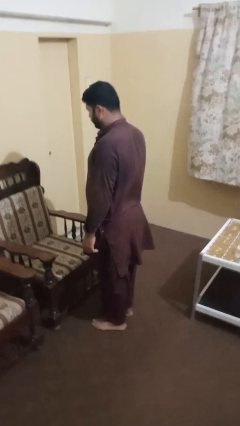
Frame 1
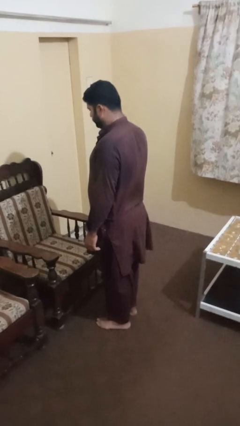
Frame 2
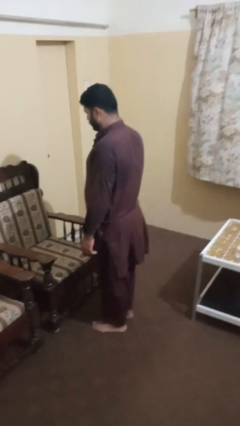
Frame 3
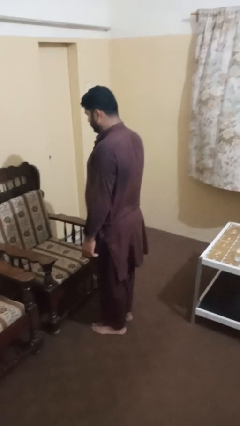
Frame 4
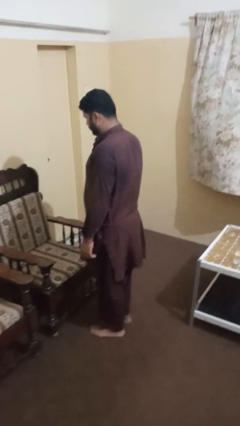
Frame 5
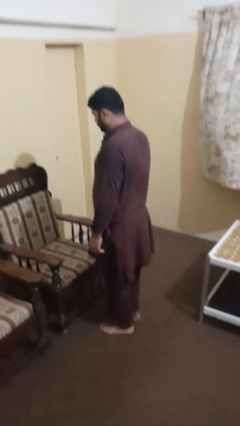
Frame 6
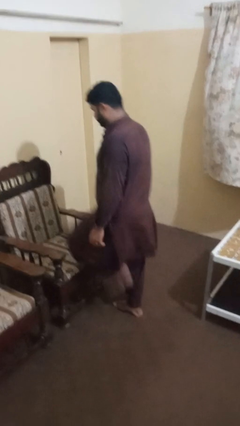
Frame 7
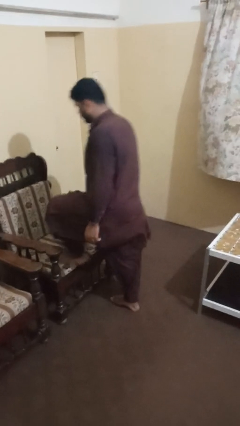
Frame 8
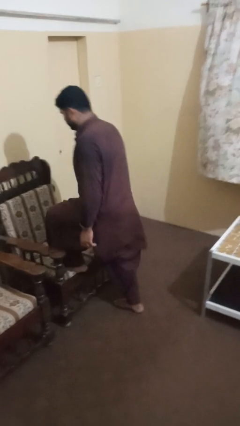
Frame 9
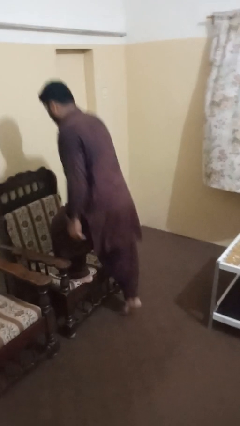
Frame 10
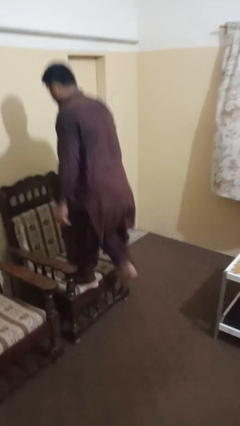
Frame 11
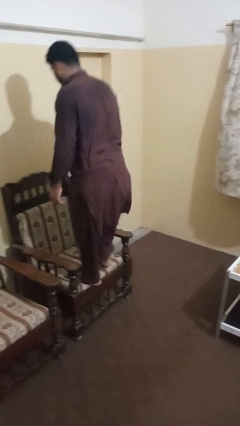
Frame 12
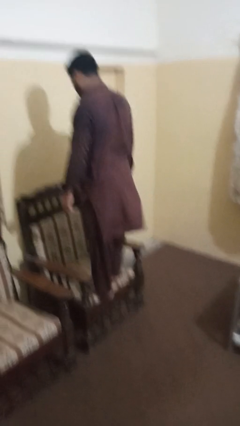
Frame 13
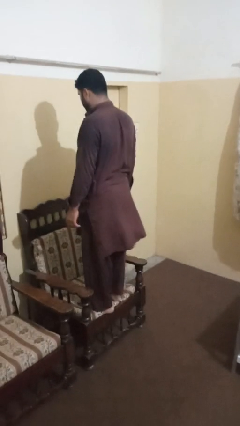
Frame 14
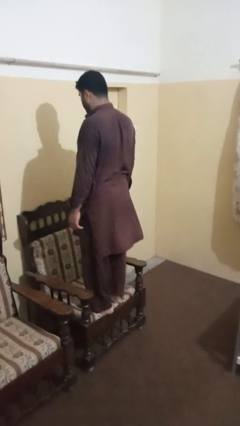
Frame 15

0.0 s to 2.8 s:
person climbs on chair

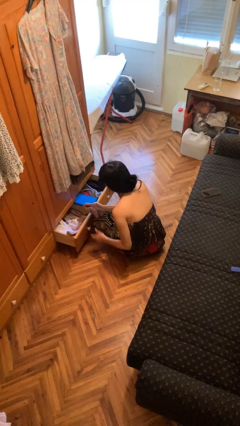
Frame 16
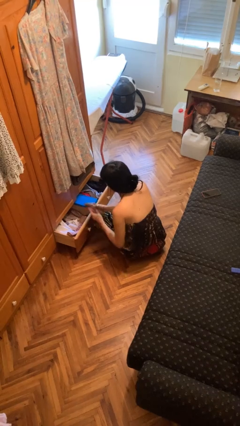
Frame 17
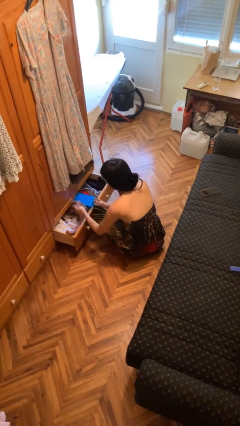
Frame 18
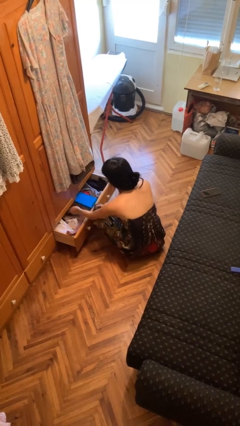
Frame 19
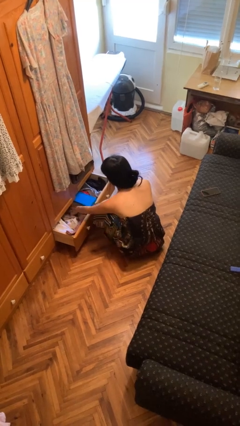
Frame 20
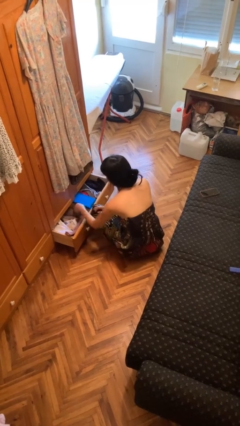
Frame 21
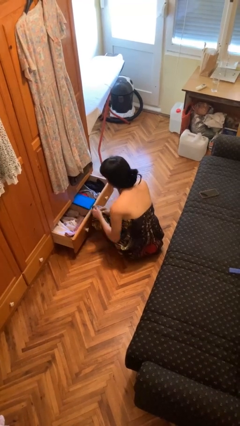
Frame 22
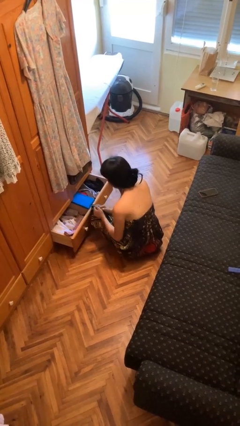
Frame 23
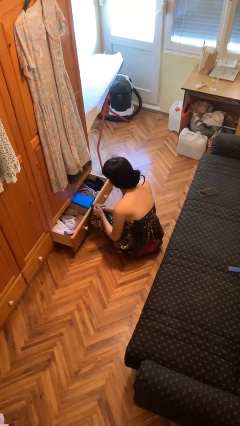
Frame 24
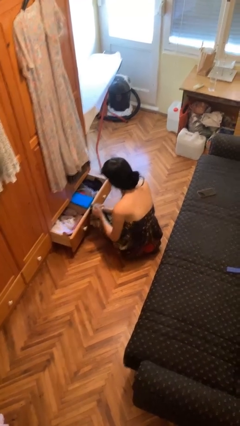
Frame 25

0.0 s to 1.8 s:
person puts clothes into dresser

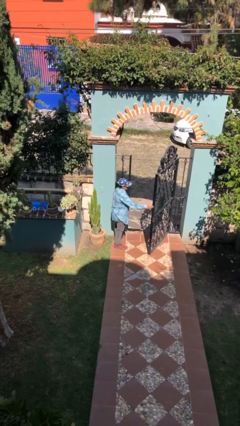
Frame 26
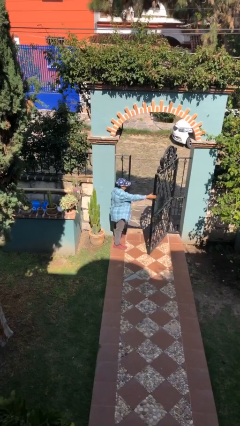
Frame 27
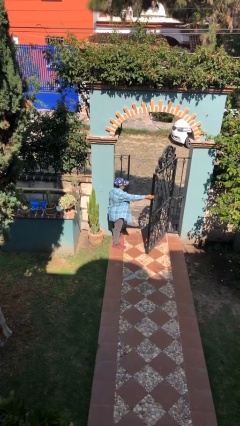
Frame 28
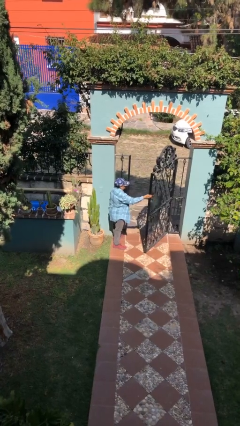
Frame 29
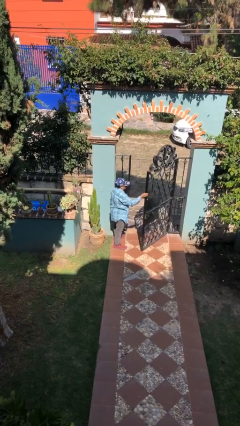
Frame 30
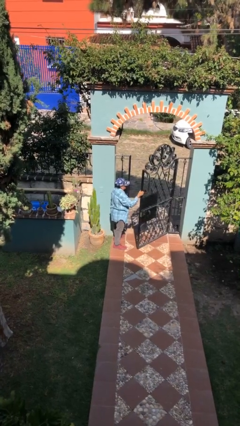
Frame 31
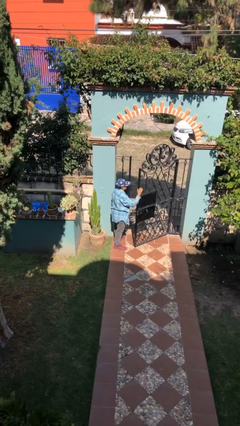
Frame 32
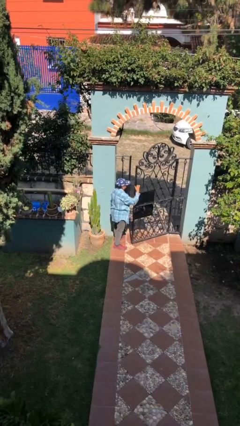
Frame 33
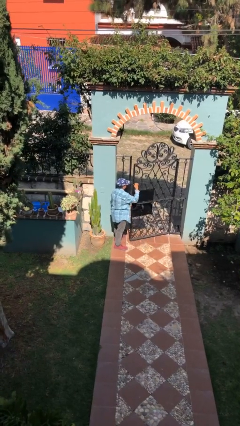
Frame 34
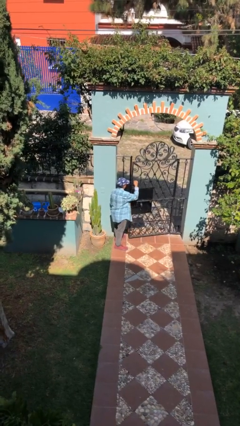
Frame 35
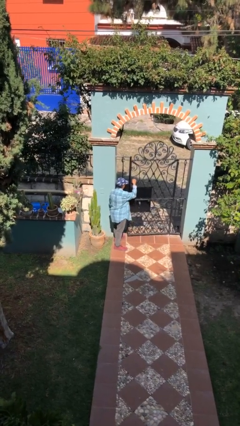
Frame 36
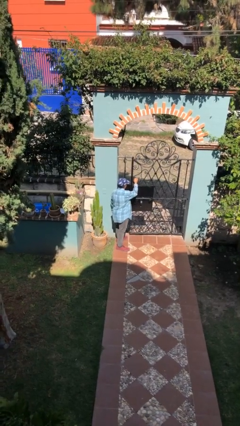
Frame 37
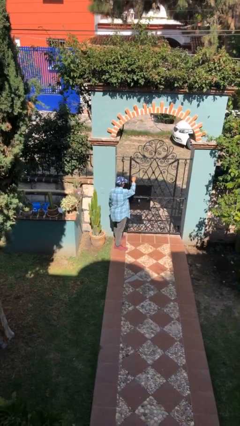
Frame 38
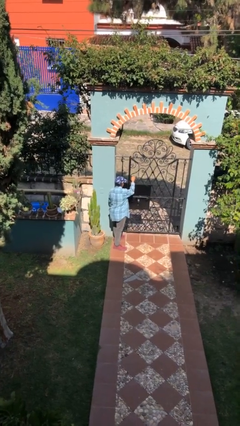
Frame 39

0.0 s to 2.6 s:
person closes facility door

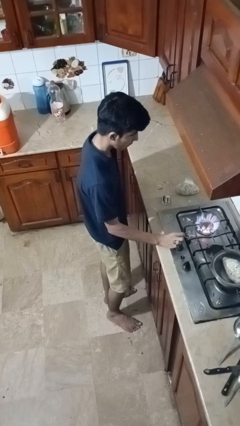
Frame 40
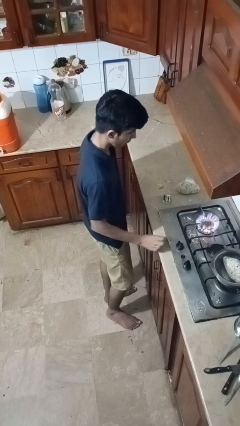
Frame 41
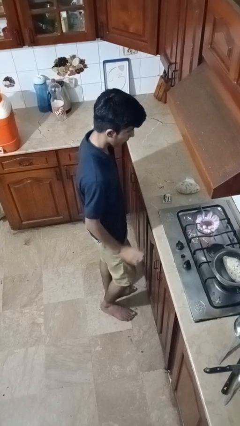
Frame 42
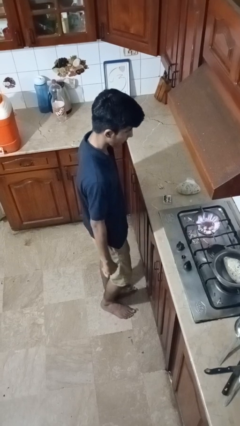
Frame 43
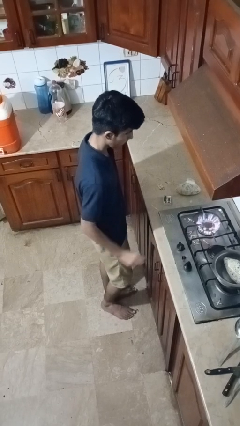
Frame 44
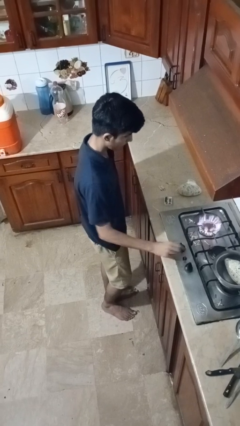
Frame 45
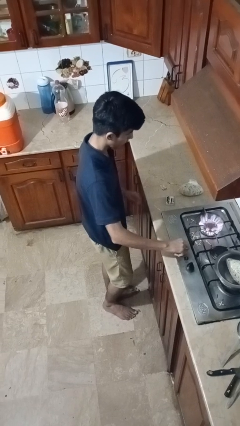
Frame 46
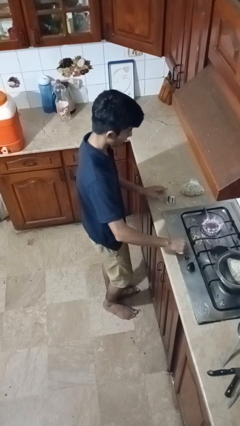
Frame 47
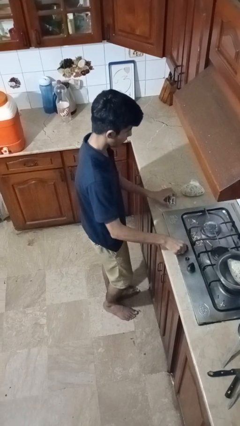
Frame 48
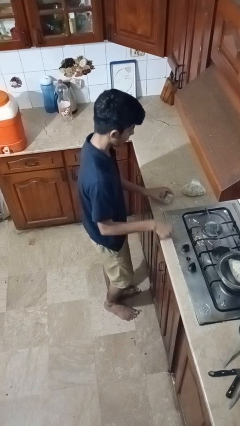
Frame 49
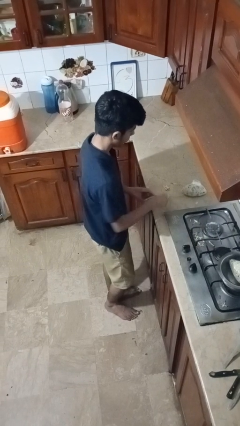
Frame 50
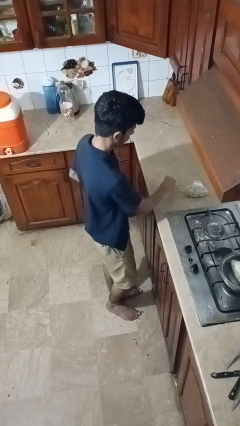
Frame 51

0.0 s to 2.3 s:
person turns off stovetop

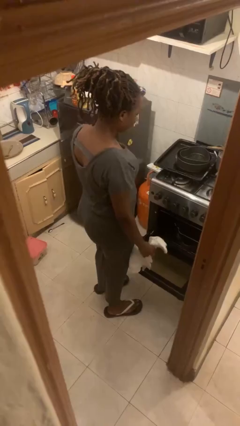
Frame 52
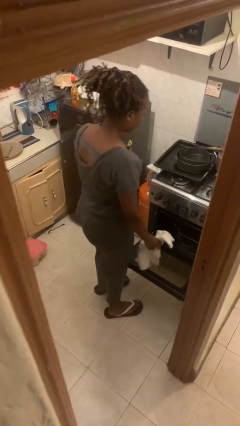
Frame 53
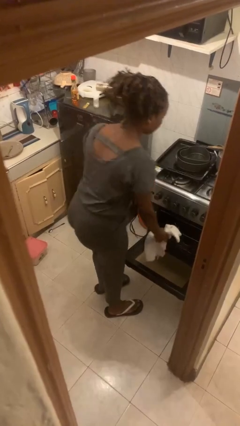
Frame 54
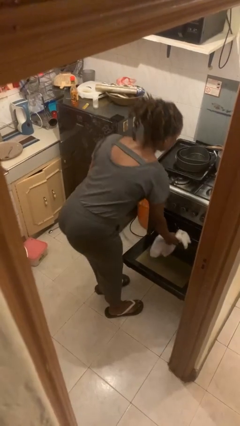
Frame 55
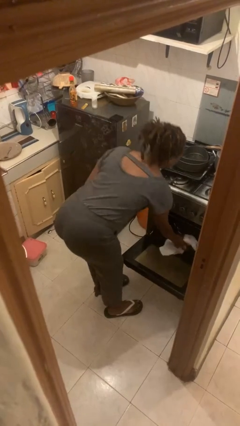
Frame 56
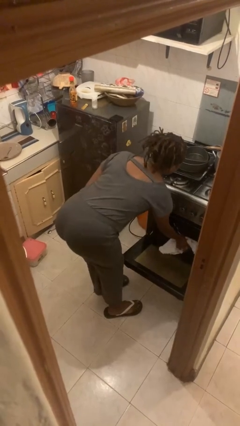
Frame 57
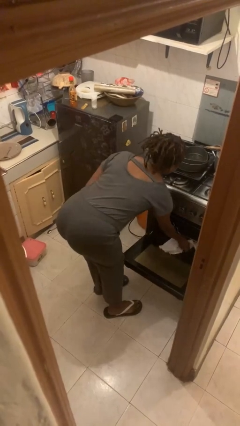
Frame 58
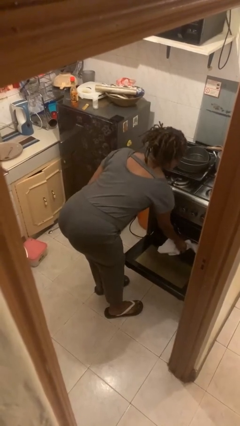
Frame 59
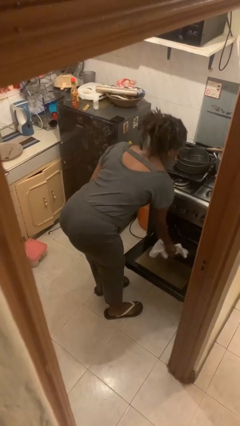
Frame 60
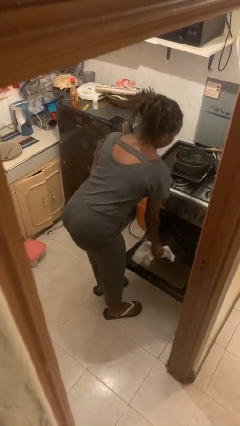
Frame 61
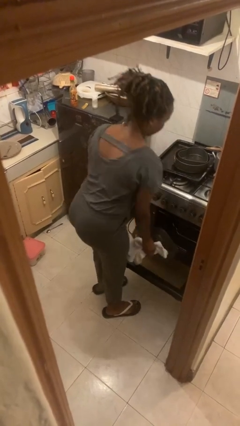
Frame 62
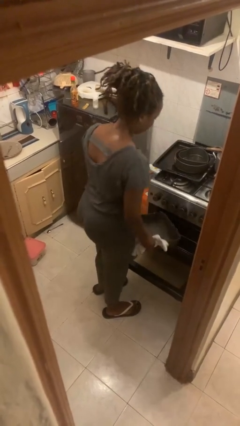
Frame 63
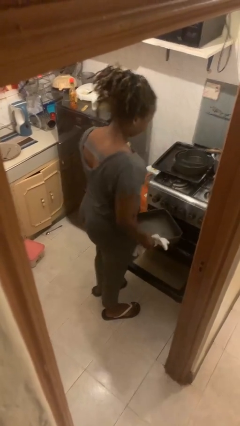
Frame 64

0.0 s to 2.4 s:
person takes object from oven

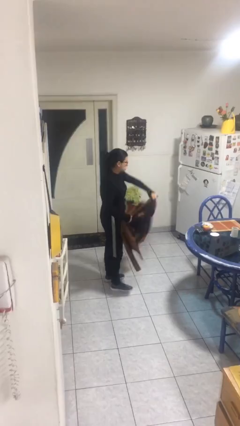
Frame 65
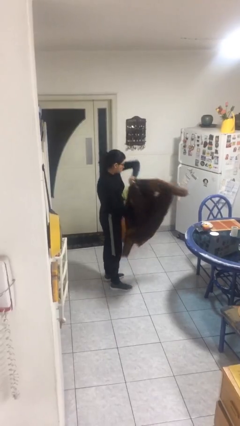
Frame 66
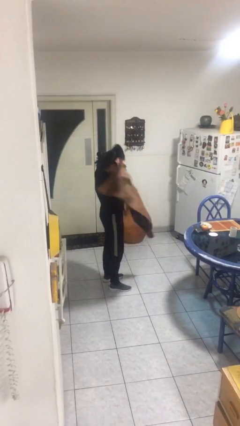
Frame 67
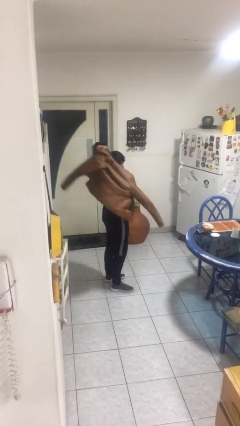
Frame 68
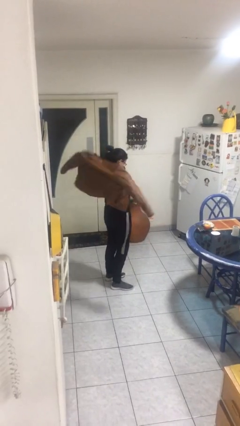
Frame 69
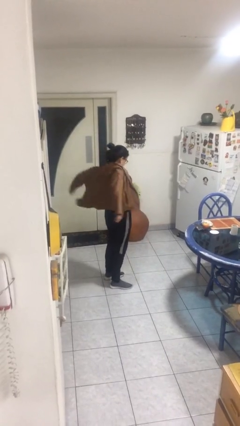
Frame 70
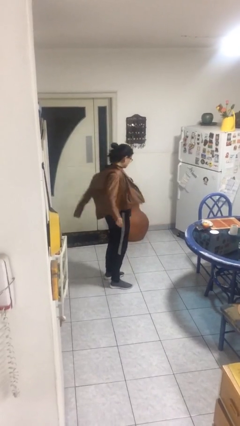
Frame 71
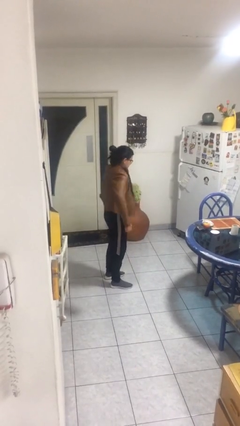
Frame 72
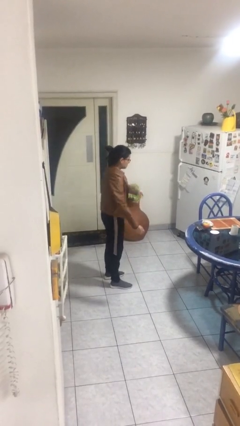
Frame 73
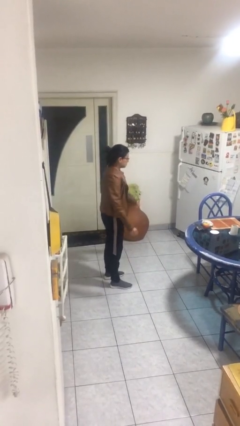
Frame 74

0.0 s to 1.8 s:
person puts on jacket

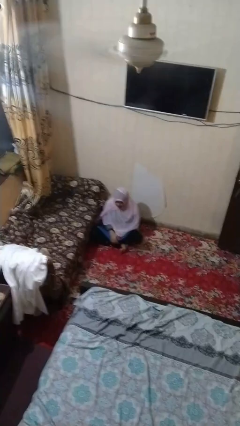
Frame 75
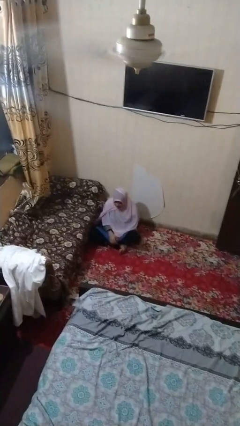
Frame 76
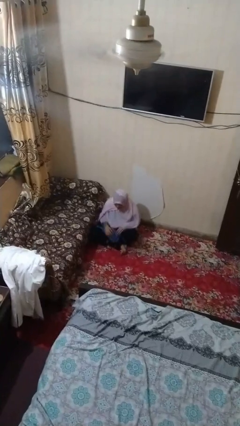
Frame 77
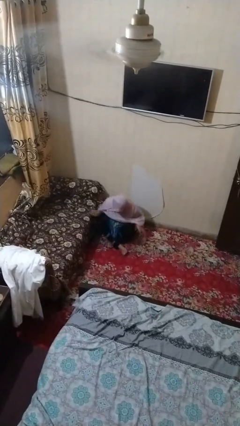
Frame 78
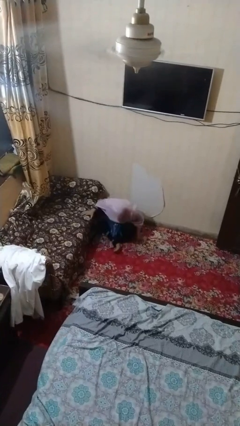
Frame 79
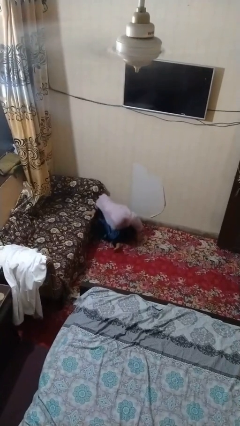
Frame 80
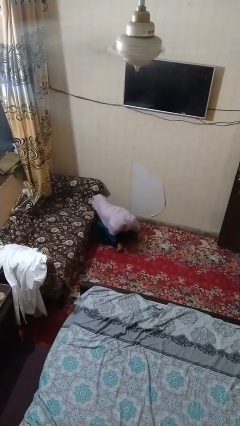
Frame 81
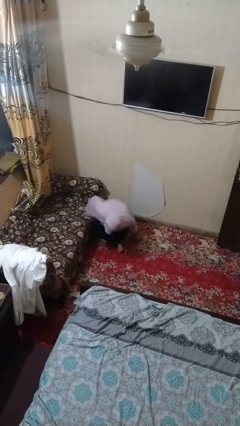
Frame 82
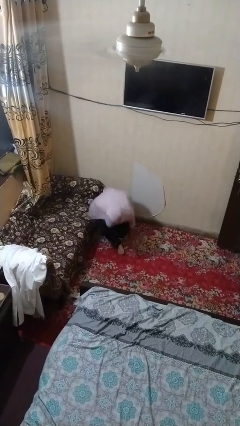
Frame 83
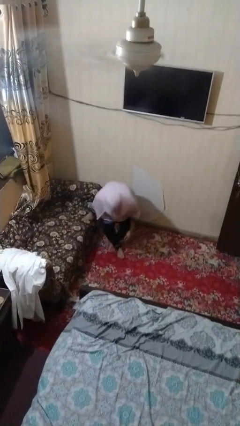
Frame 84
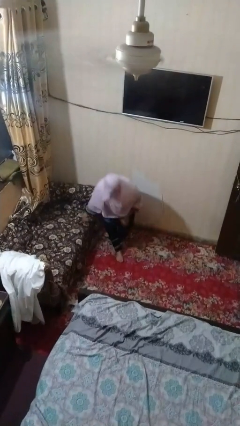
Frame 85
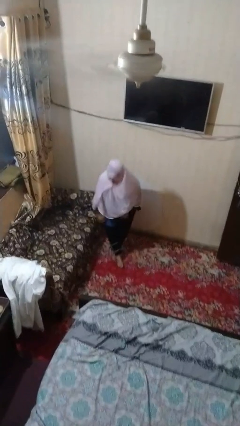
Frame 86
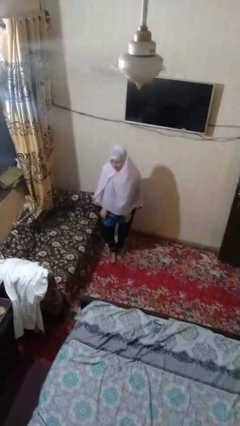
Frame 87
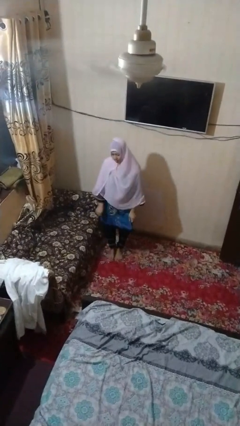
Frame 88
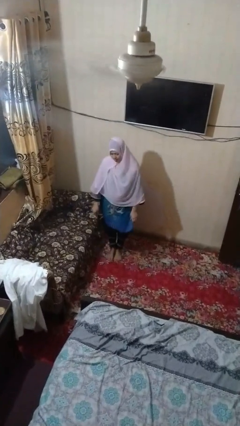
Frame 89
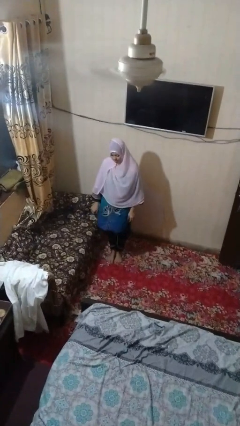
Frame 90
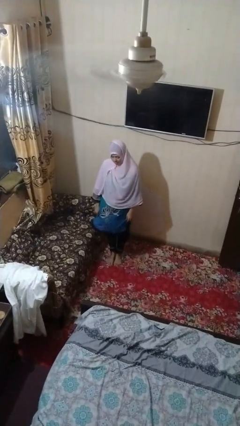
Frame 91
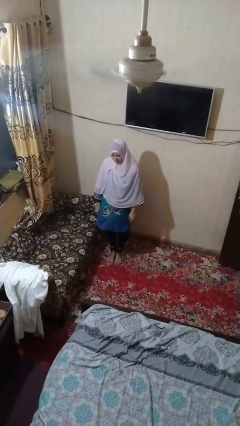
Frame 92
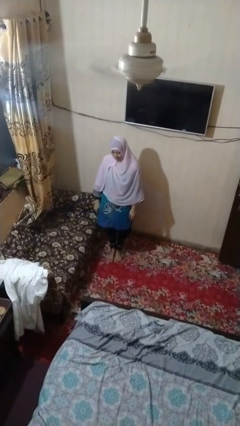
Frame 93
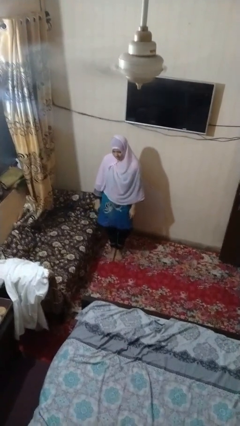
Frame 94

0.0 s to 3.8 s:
person stands up from floor
